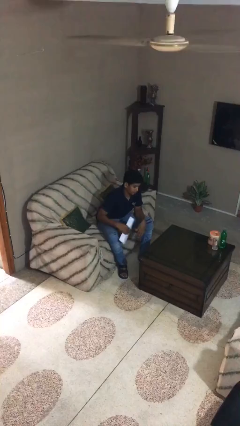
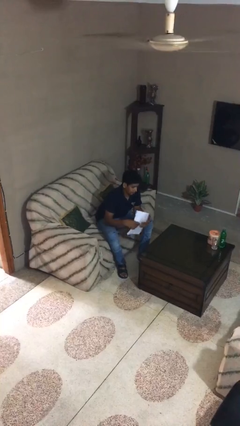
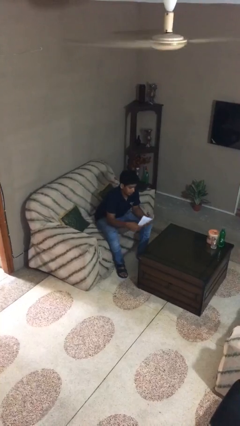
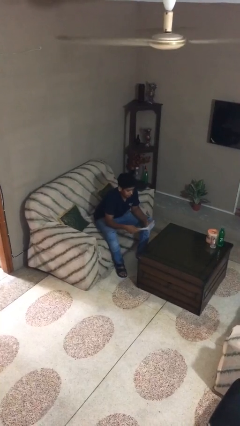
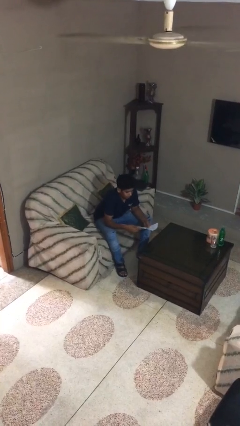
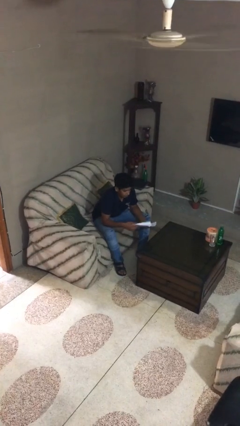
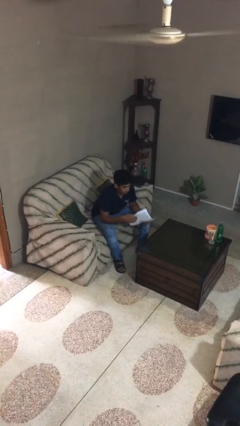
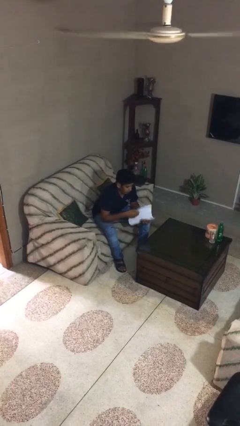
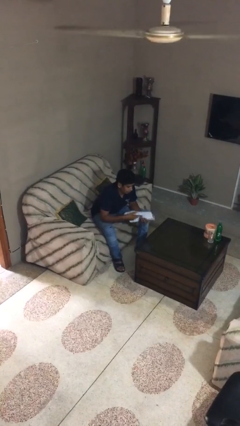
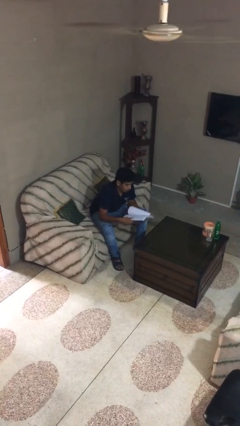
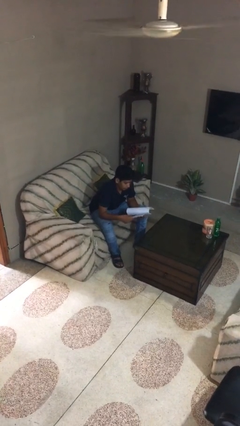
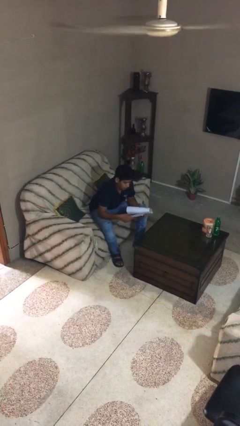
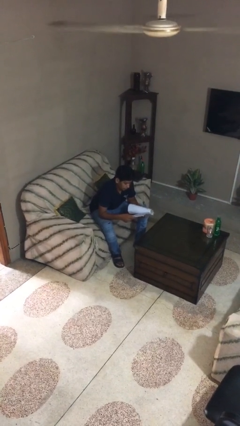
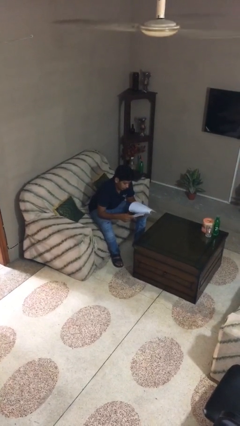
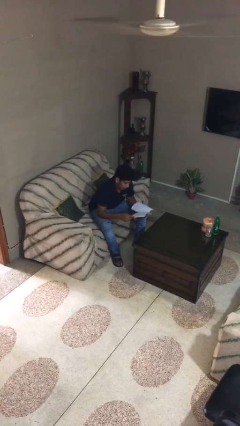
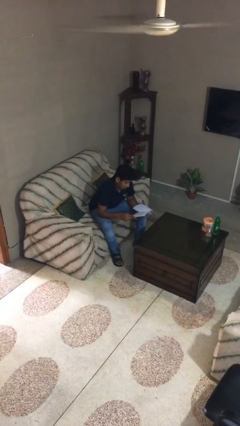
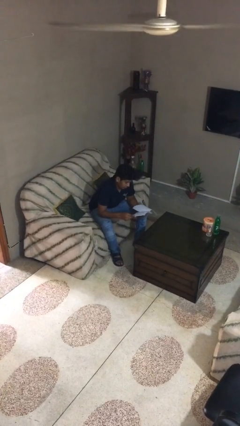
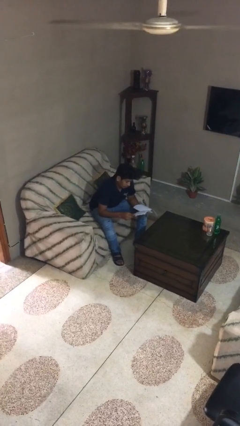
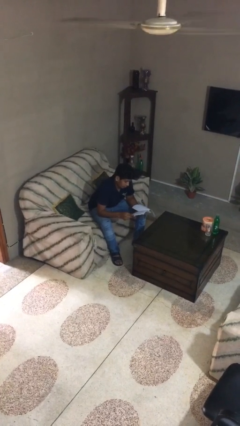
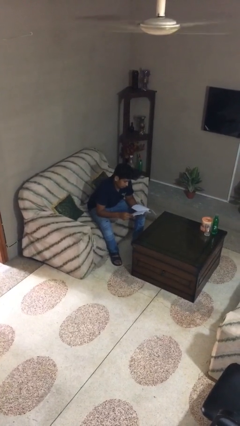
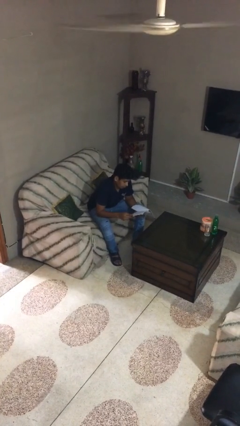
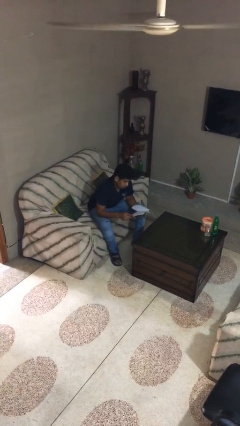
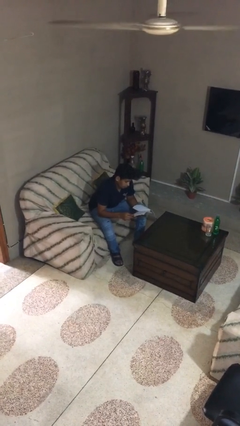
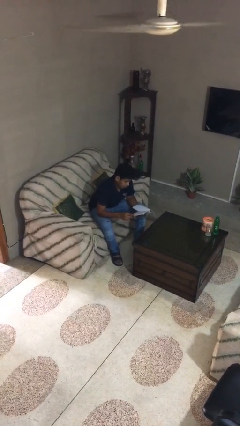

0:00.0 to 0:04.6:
person reads document

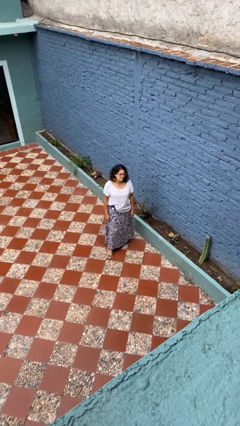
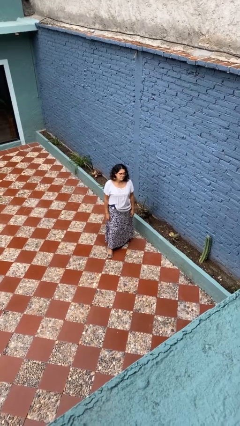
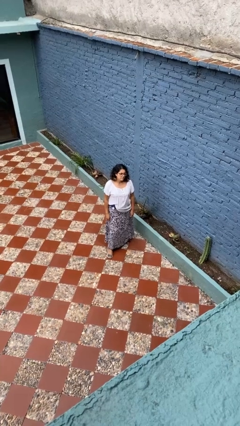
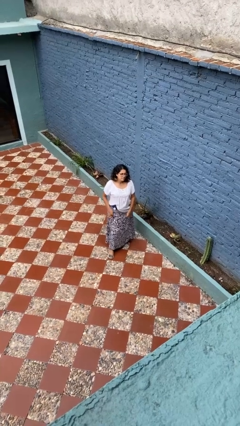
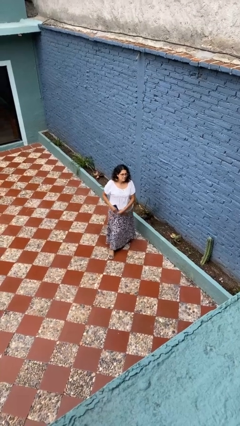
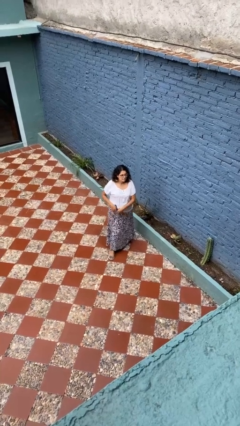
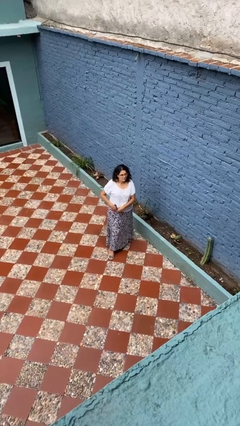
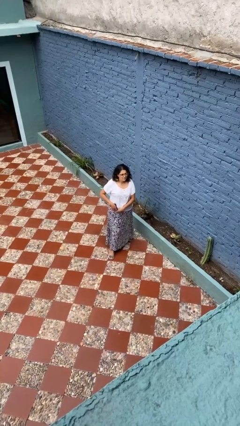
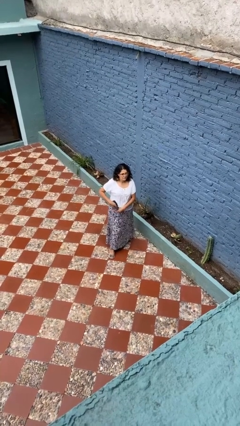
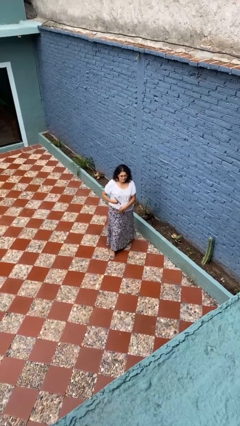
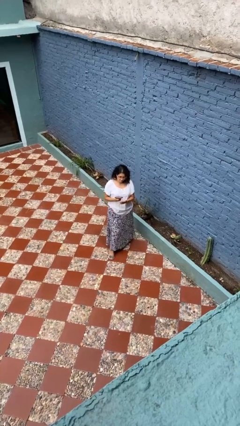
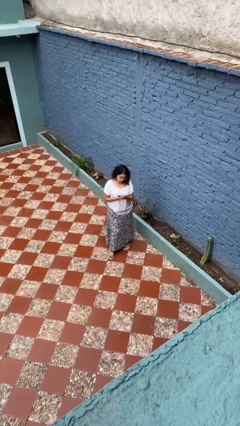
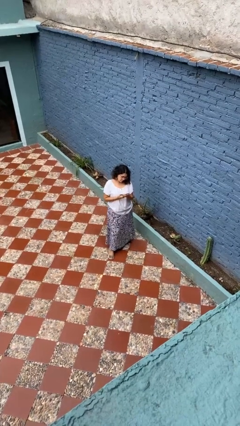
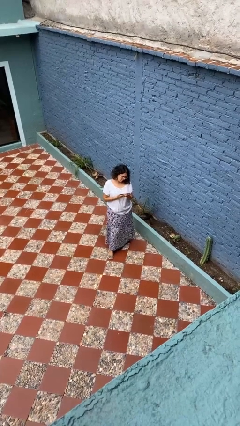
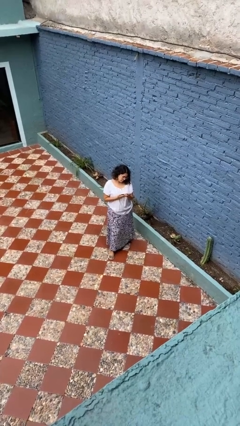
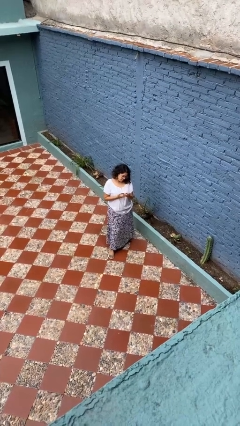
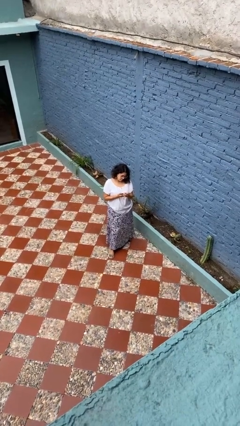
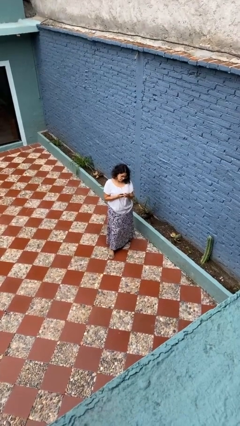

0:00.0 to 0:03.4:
person takes phone from pocket

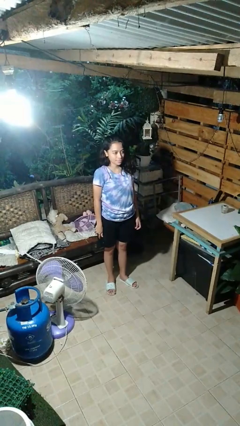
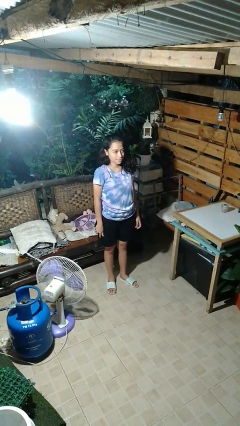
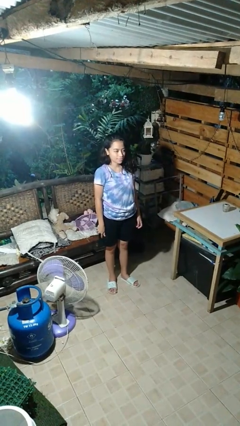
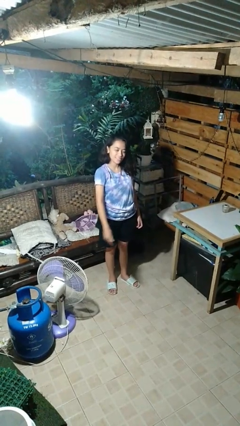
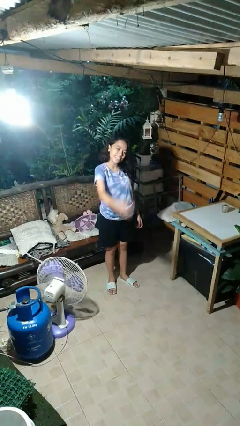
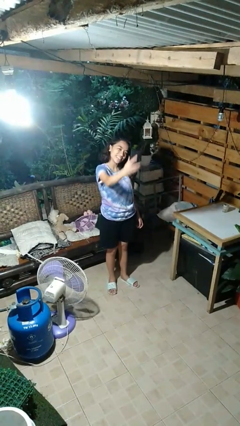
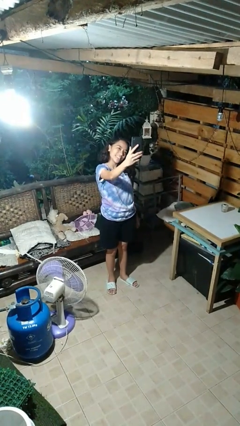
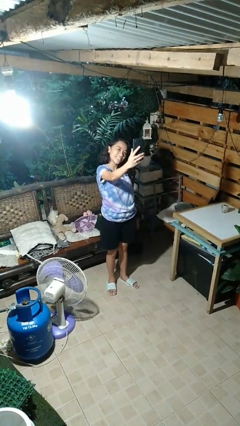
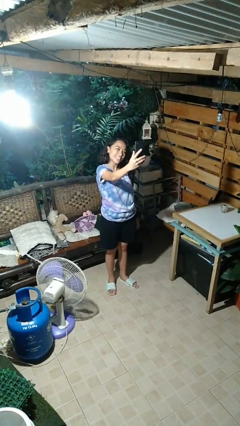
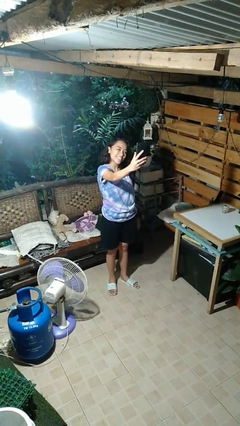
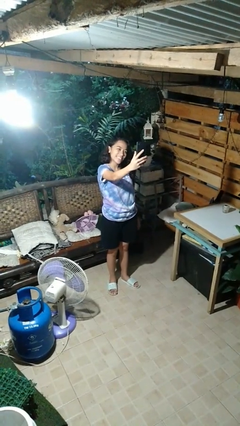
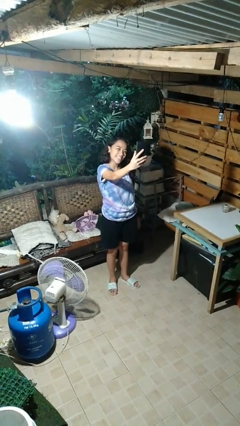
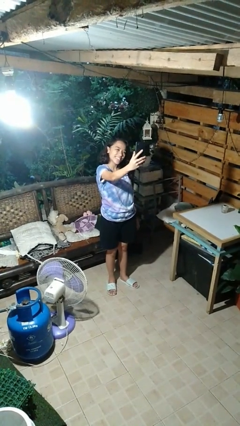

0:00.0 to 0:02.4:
person takes selfie

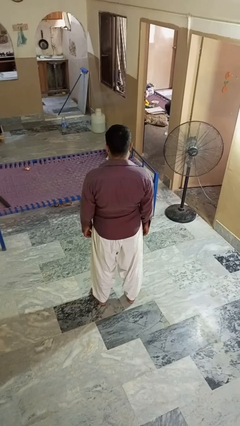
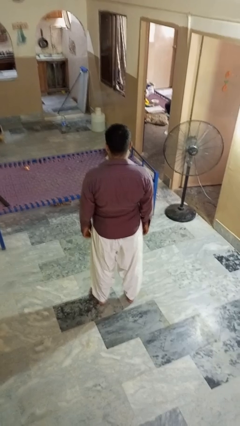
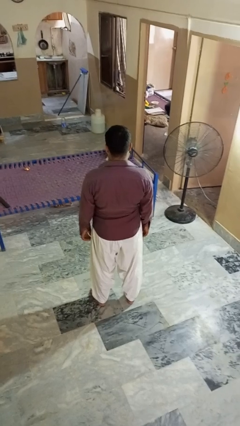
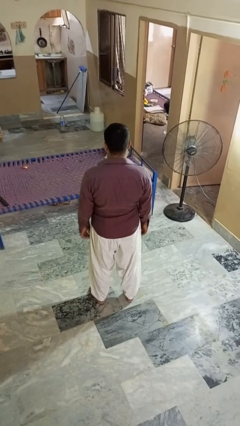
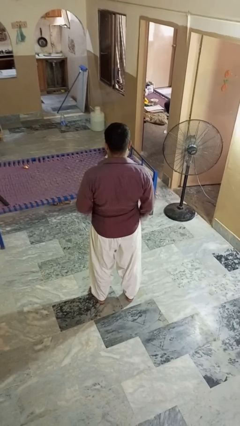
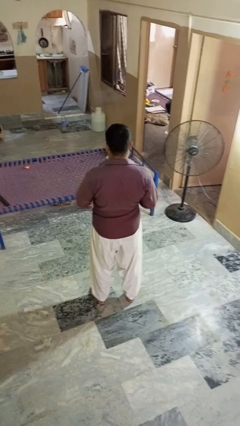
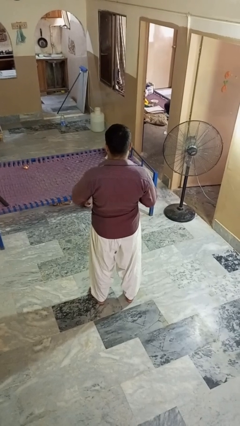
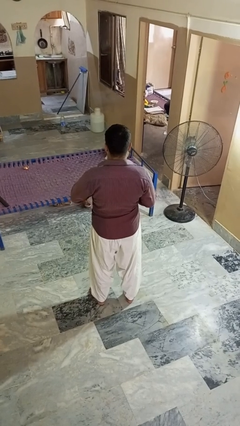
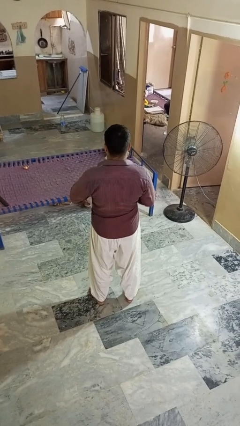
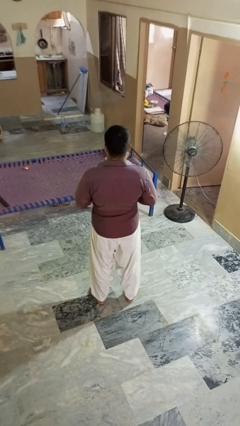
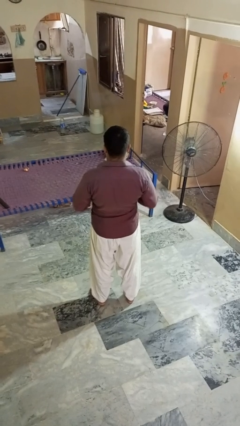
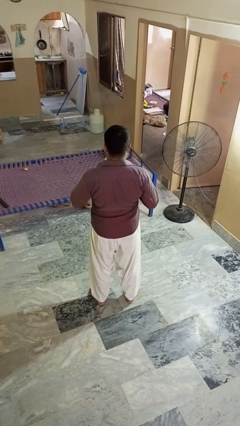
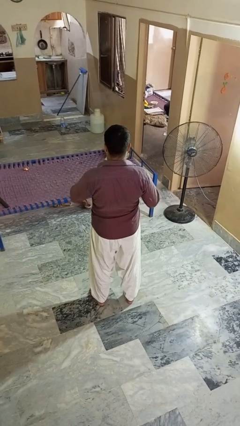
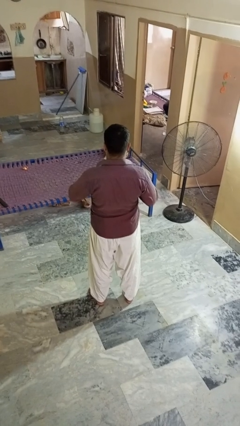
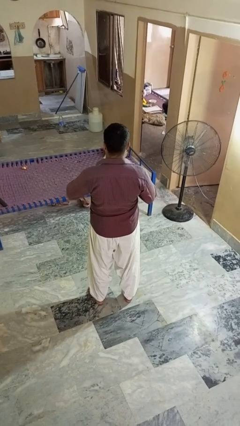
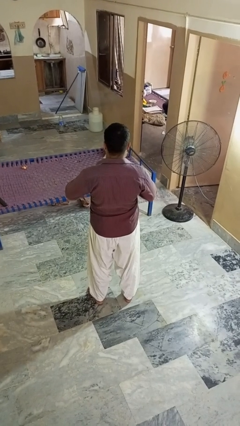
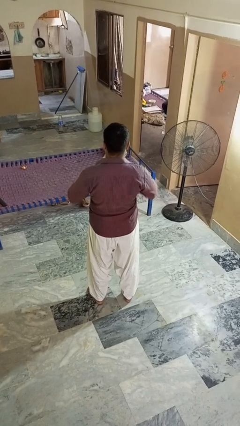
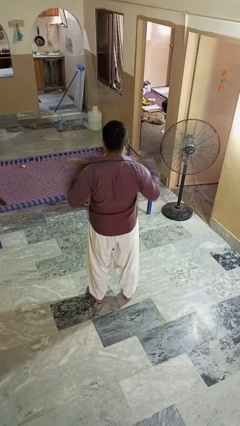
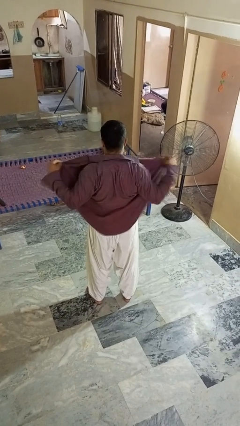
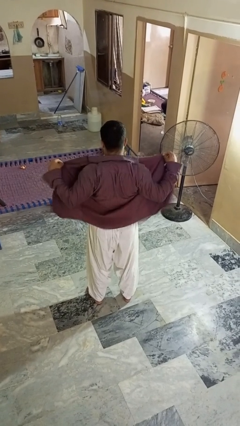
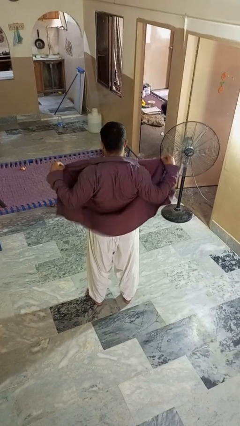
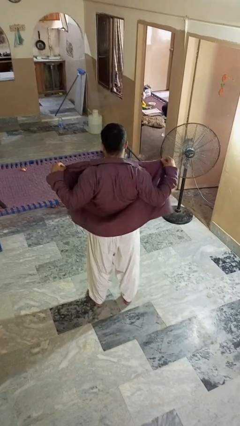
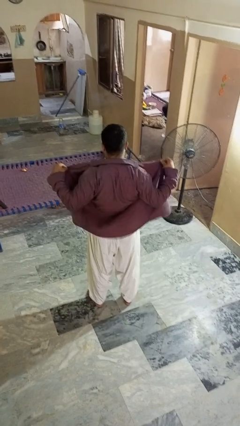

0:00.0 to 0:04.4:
person unbuttons shirt

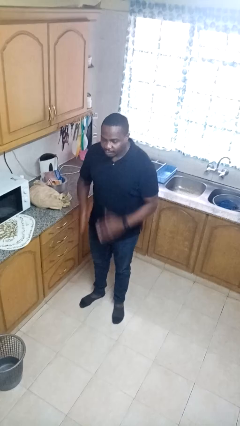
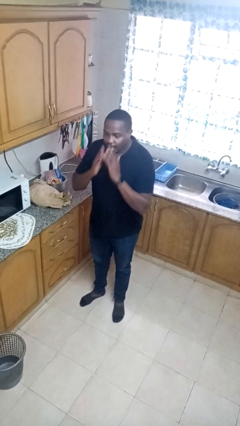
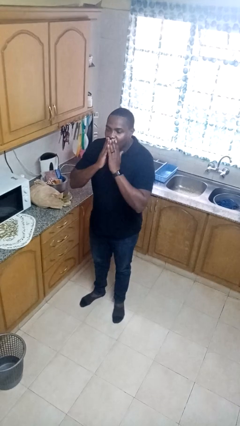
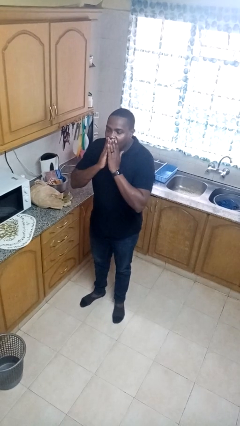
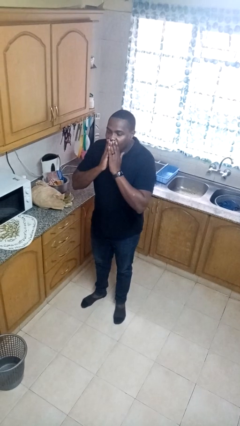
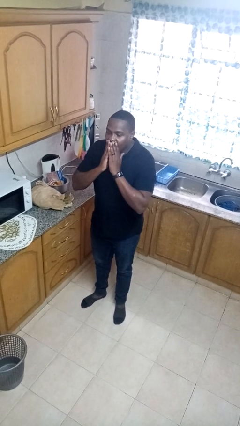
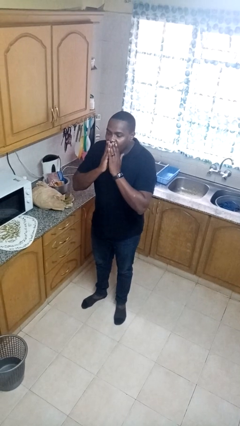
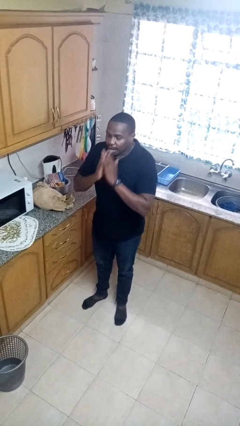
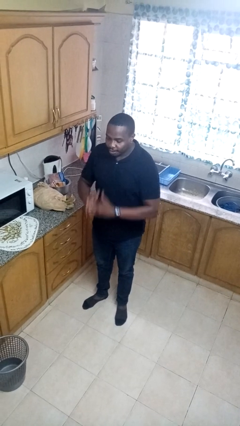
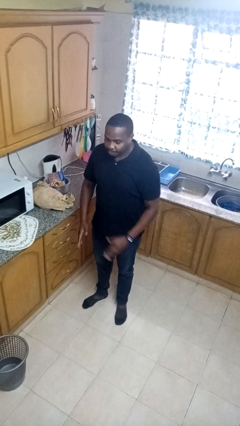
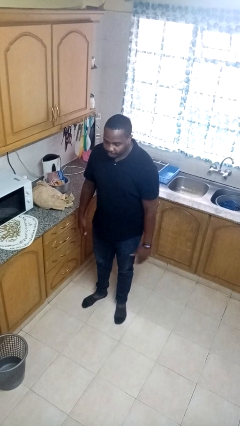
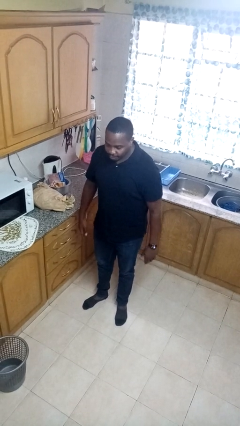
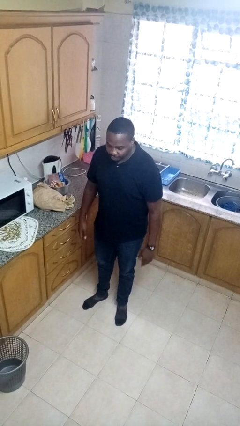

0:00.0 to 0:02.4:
person yawns

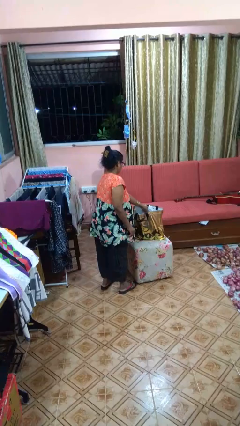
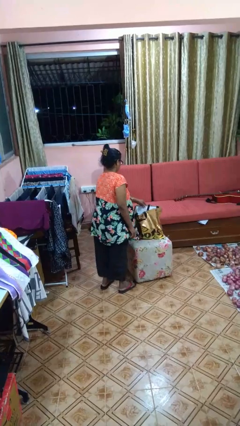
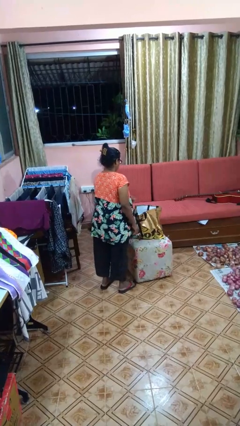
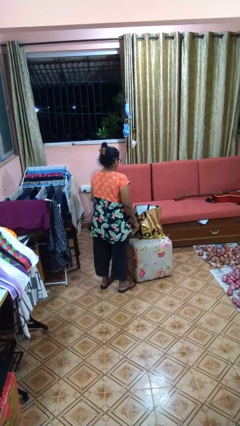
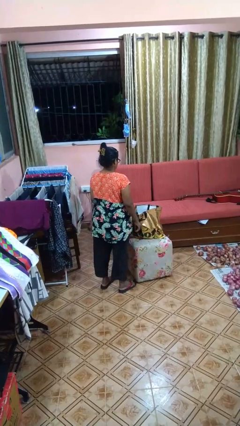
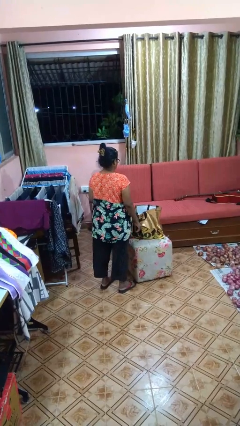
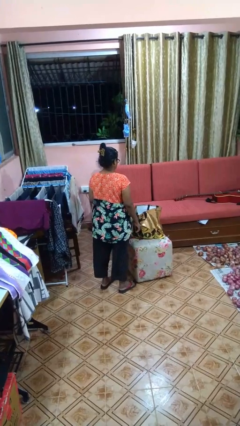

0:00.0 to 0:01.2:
person puts object into bag
